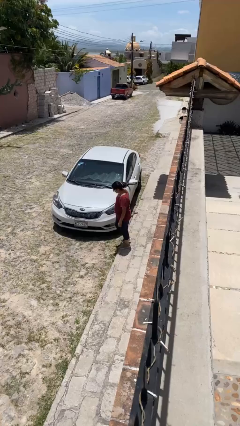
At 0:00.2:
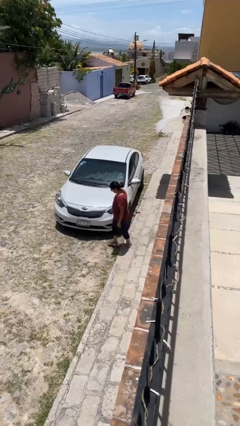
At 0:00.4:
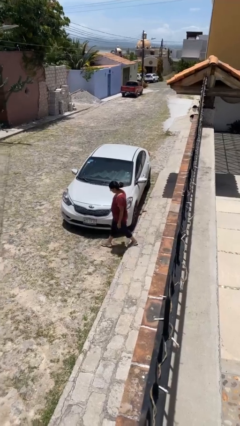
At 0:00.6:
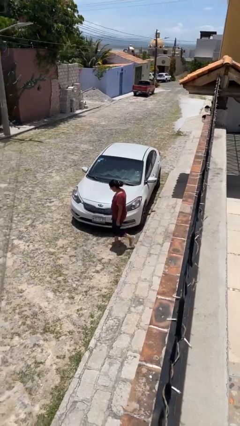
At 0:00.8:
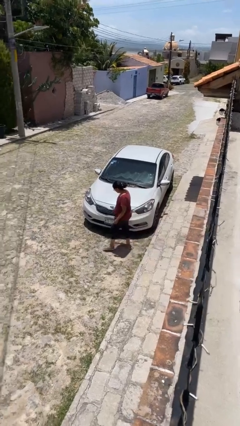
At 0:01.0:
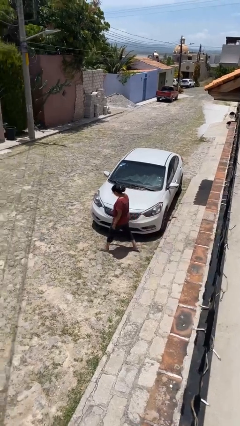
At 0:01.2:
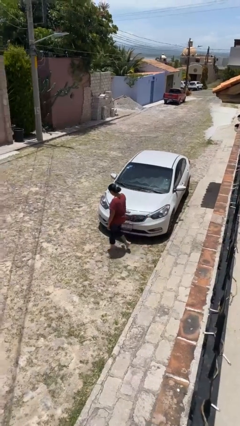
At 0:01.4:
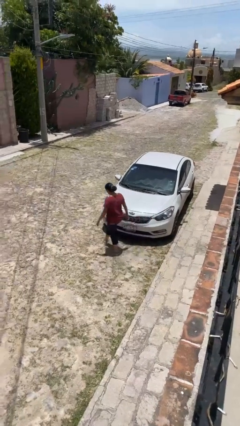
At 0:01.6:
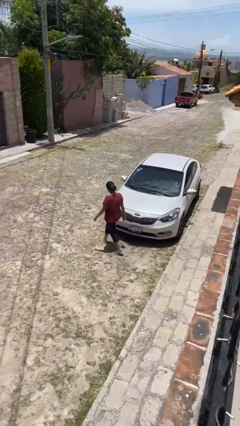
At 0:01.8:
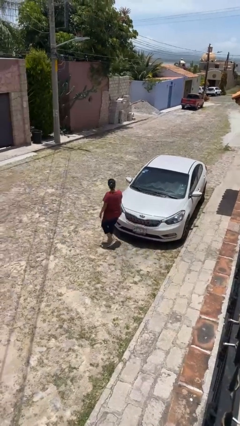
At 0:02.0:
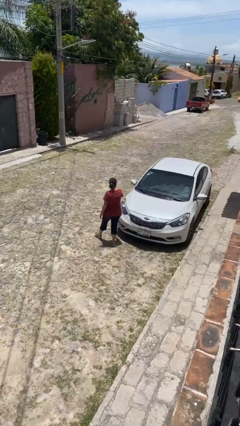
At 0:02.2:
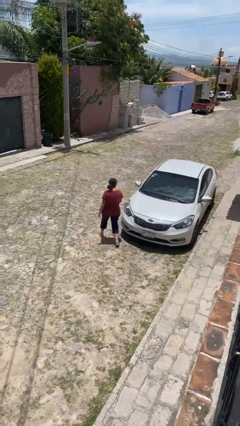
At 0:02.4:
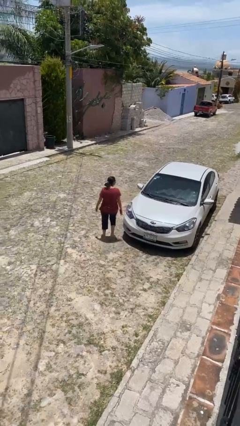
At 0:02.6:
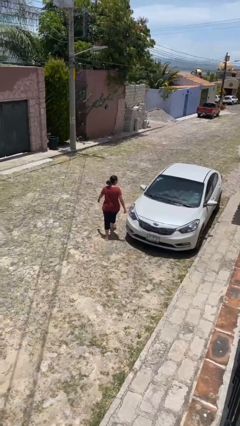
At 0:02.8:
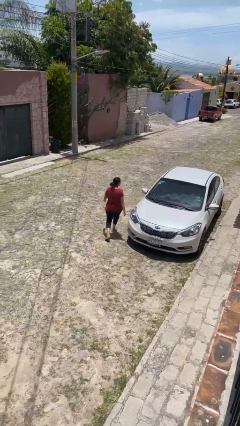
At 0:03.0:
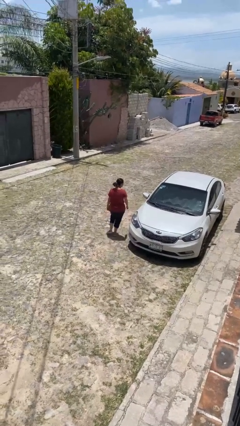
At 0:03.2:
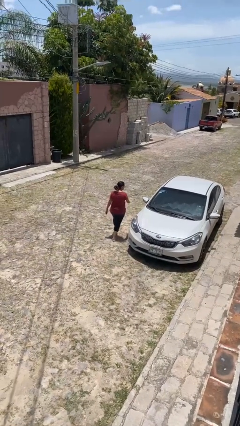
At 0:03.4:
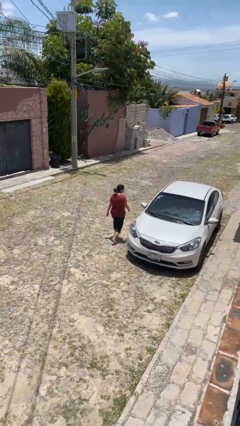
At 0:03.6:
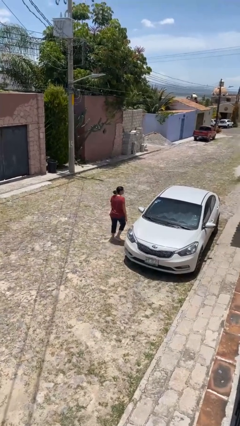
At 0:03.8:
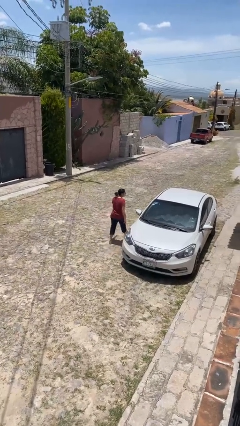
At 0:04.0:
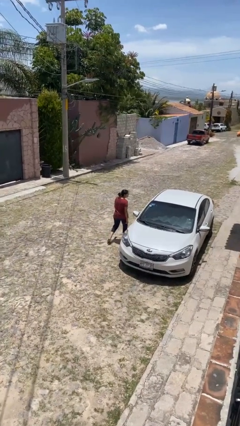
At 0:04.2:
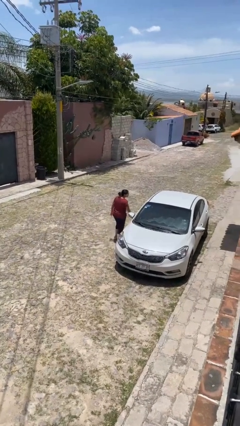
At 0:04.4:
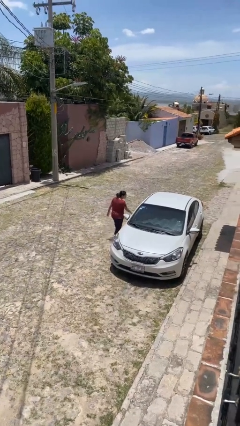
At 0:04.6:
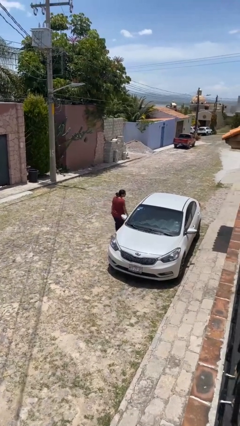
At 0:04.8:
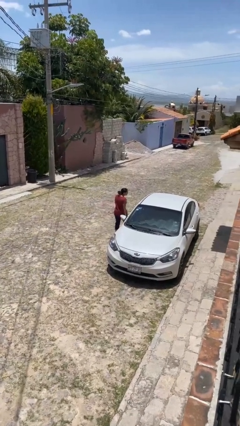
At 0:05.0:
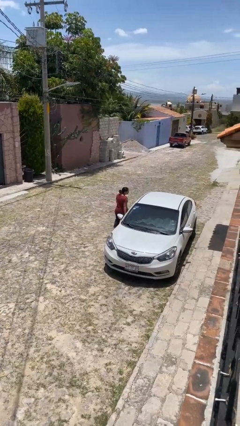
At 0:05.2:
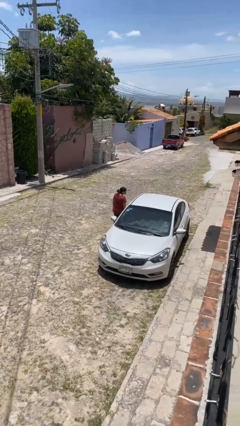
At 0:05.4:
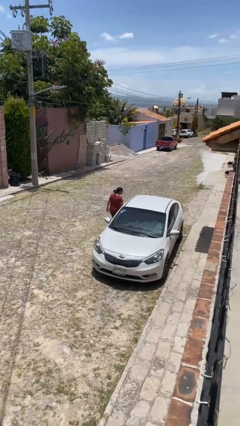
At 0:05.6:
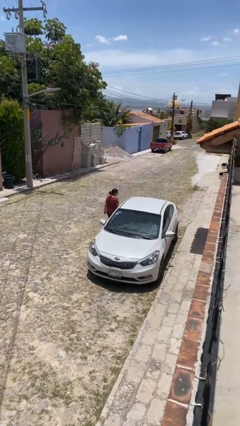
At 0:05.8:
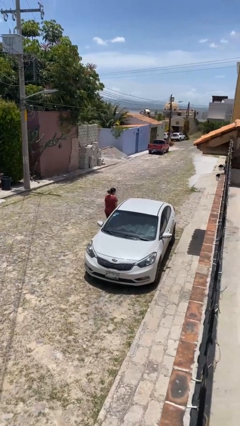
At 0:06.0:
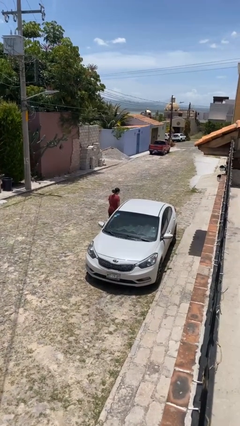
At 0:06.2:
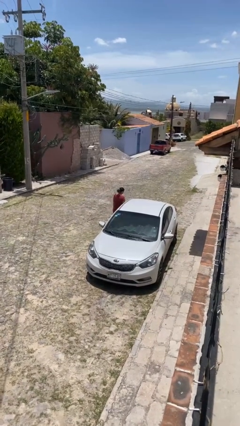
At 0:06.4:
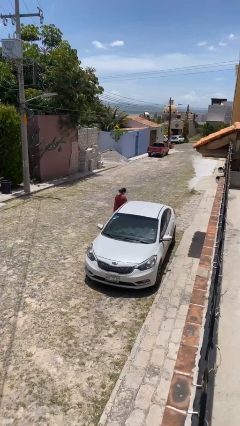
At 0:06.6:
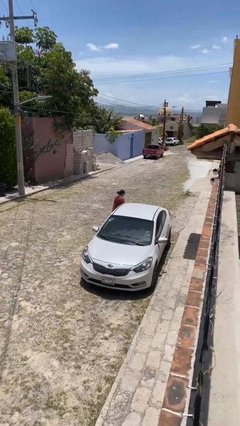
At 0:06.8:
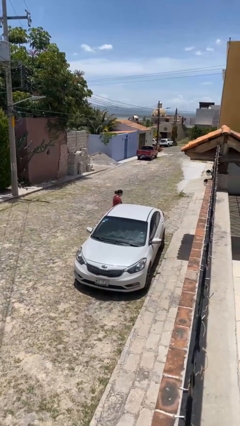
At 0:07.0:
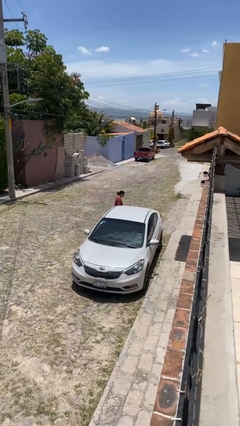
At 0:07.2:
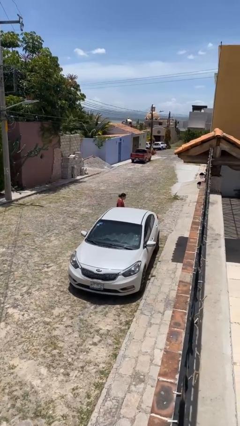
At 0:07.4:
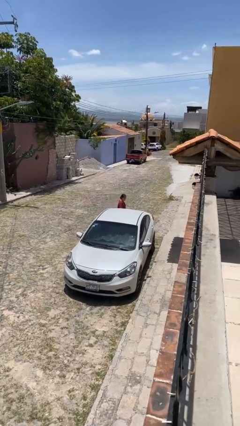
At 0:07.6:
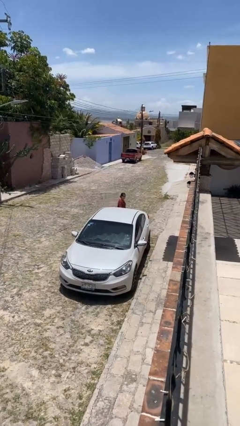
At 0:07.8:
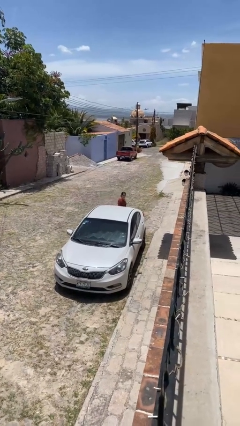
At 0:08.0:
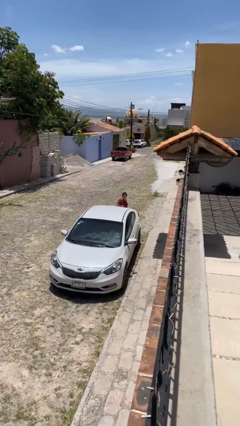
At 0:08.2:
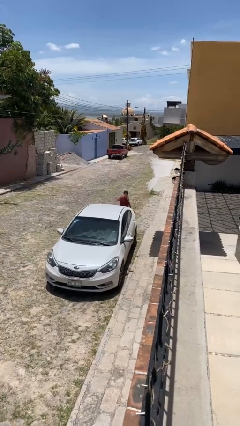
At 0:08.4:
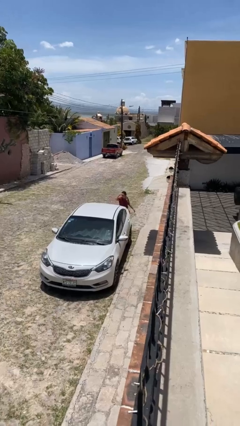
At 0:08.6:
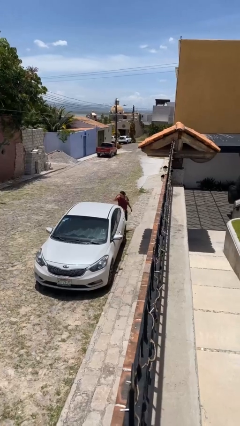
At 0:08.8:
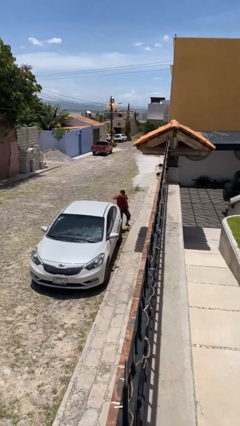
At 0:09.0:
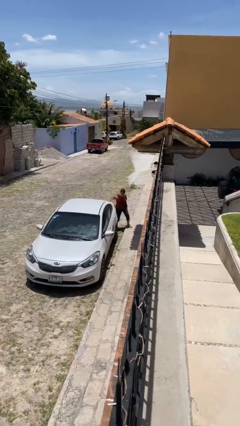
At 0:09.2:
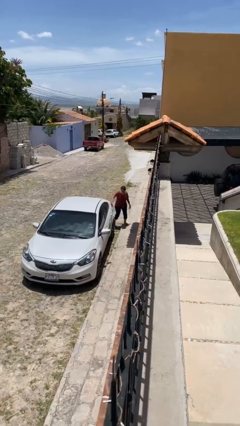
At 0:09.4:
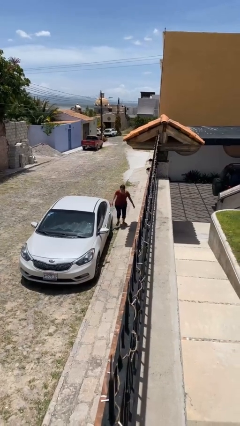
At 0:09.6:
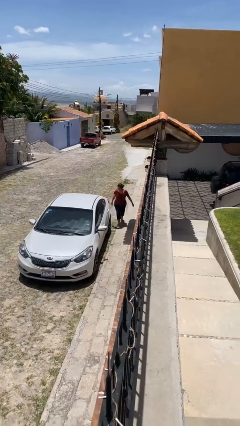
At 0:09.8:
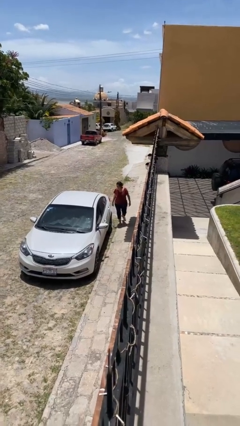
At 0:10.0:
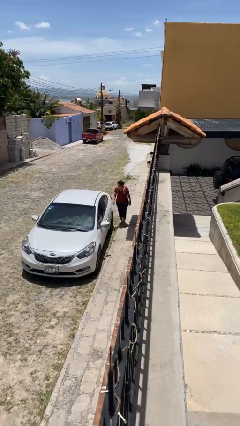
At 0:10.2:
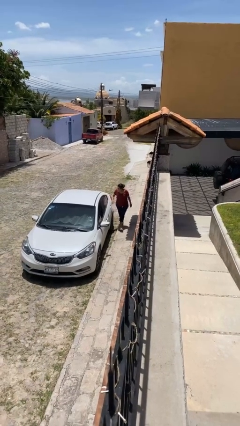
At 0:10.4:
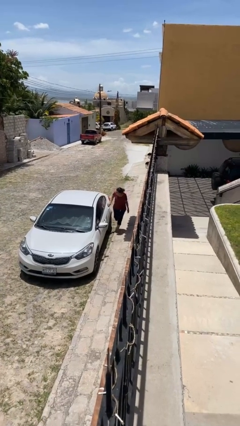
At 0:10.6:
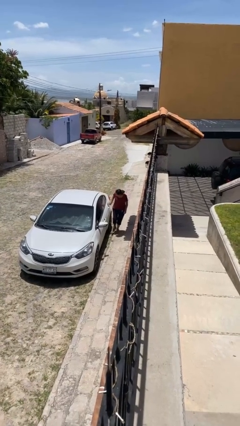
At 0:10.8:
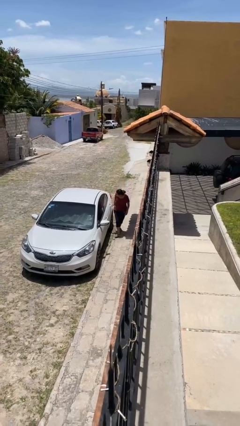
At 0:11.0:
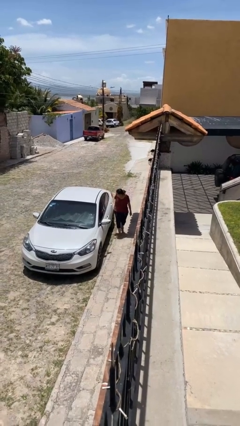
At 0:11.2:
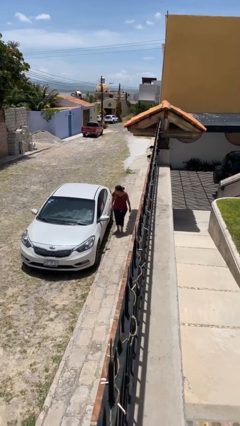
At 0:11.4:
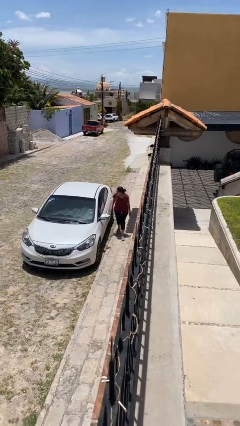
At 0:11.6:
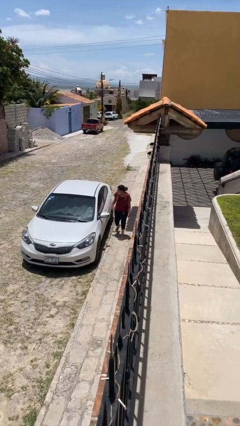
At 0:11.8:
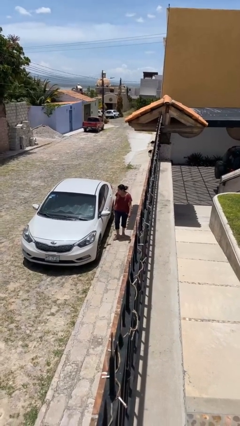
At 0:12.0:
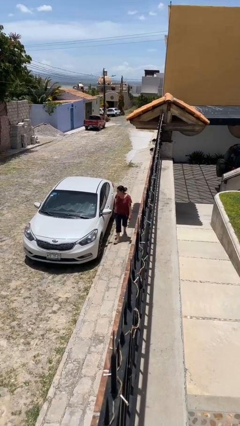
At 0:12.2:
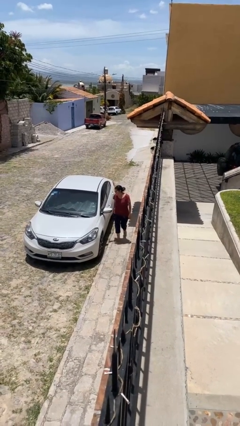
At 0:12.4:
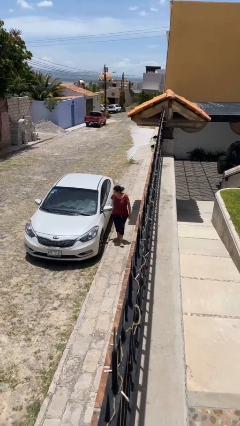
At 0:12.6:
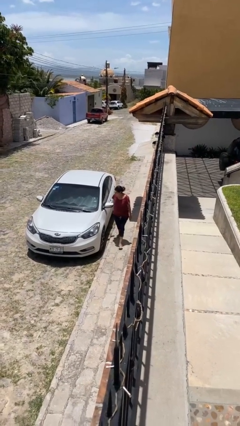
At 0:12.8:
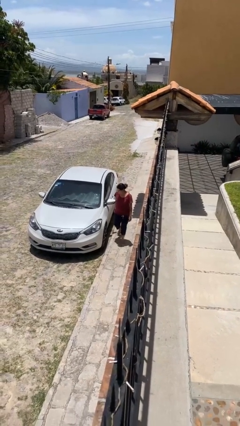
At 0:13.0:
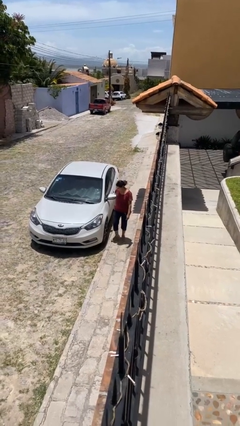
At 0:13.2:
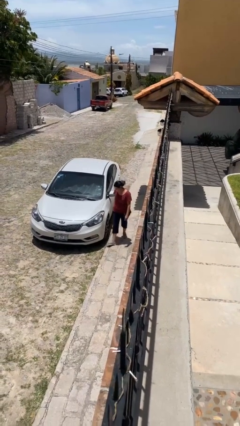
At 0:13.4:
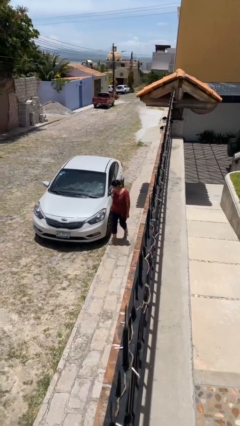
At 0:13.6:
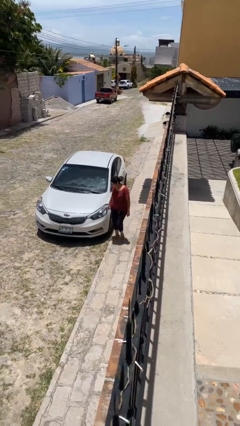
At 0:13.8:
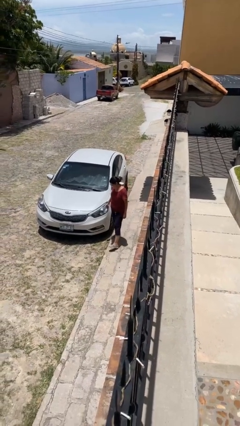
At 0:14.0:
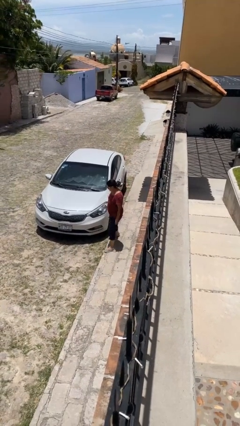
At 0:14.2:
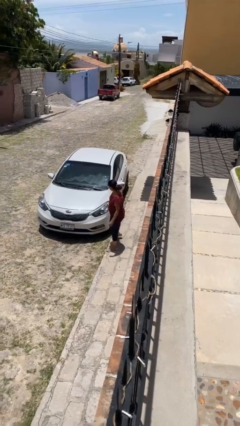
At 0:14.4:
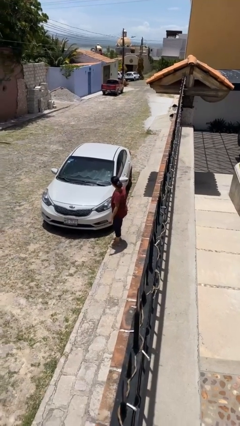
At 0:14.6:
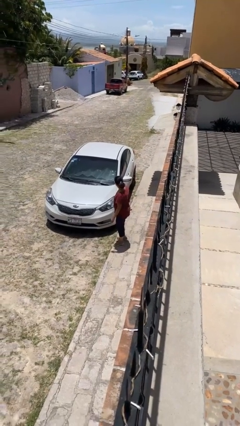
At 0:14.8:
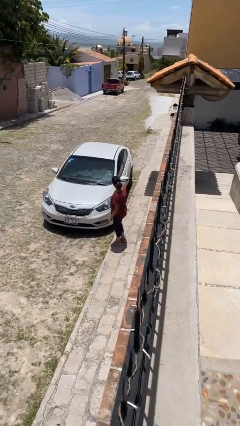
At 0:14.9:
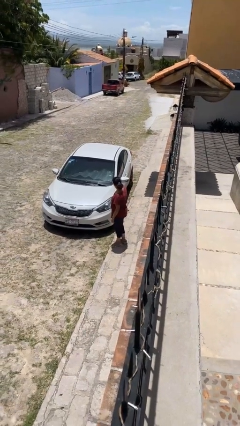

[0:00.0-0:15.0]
person walks around car

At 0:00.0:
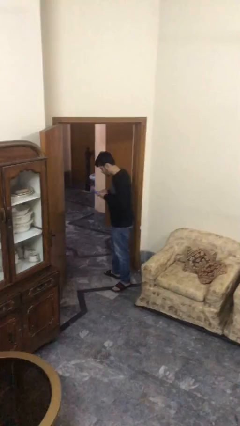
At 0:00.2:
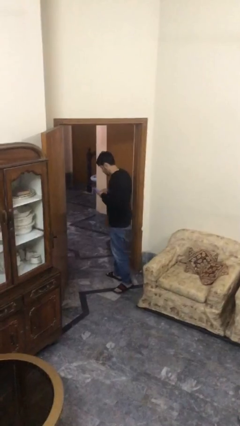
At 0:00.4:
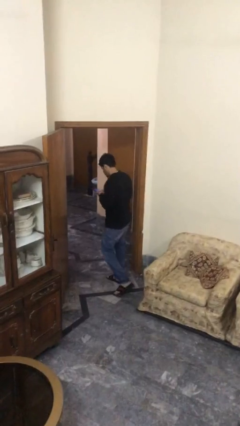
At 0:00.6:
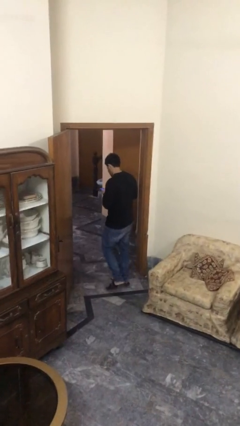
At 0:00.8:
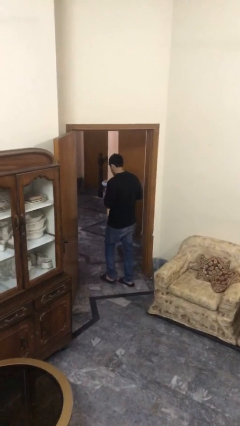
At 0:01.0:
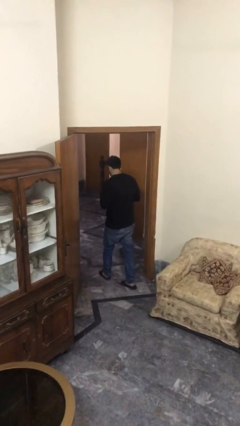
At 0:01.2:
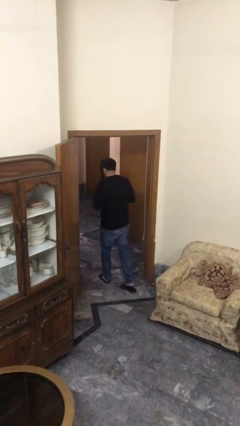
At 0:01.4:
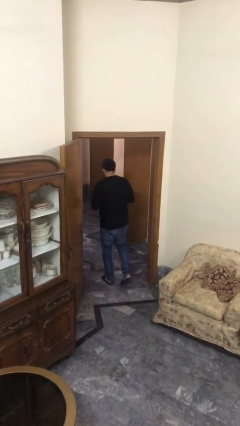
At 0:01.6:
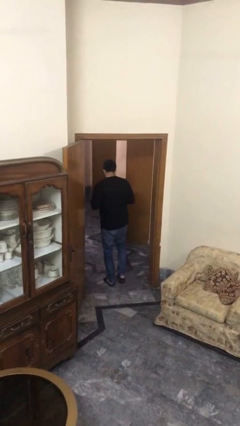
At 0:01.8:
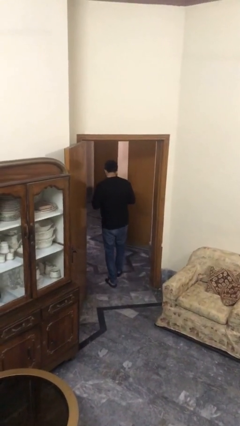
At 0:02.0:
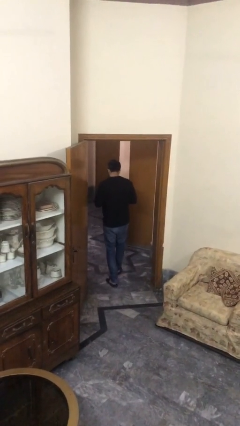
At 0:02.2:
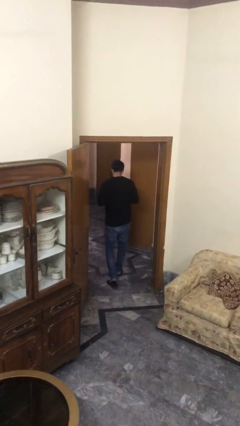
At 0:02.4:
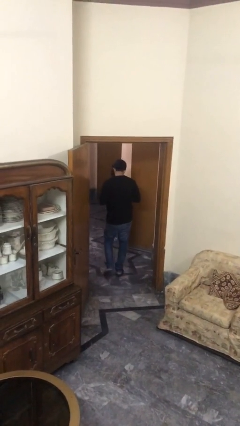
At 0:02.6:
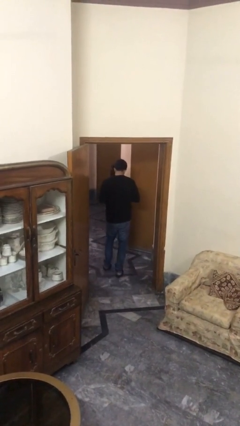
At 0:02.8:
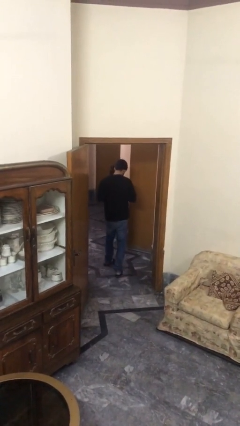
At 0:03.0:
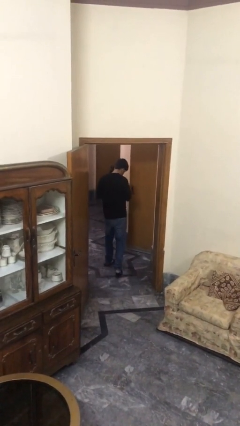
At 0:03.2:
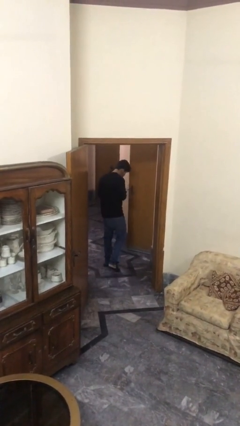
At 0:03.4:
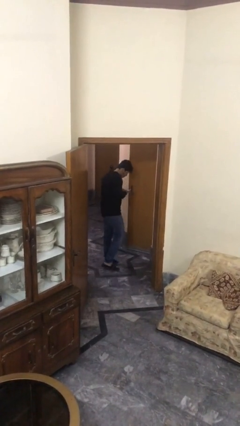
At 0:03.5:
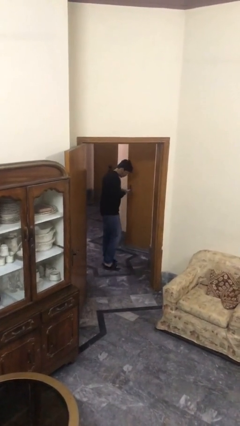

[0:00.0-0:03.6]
person exits scene through structure

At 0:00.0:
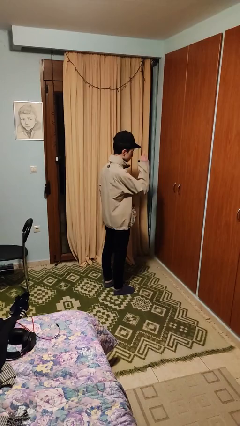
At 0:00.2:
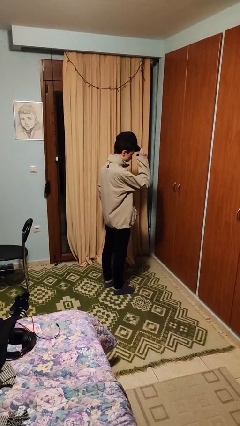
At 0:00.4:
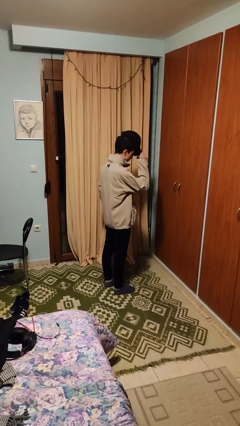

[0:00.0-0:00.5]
person takes off hat
